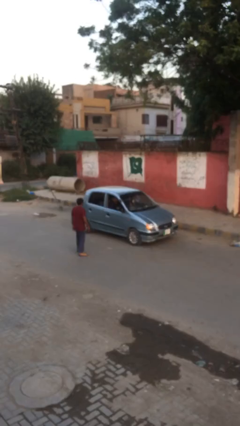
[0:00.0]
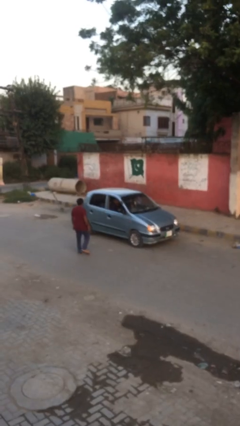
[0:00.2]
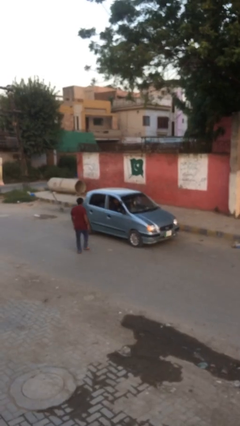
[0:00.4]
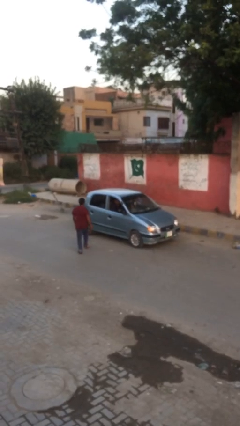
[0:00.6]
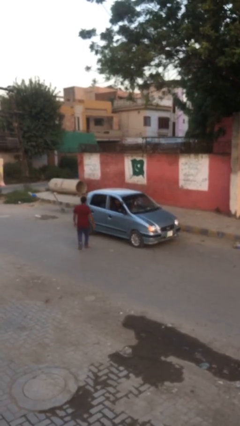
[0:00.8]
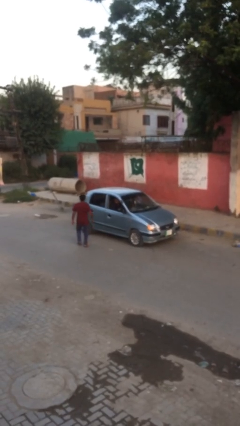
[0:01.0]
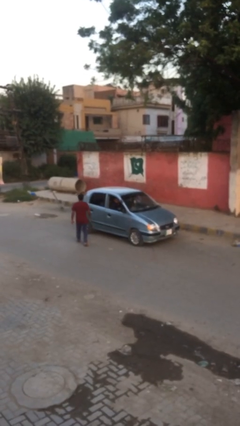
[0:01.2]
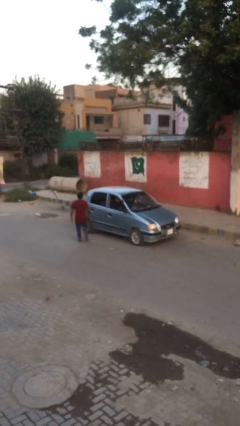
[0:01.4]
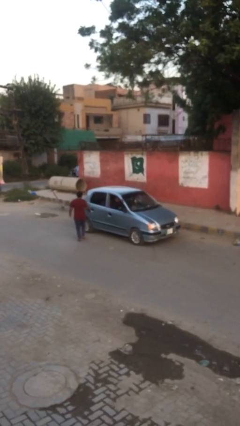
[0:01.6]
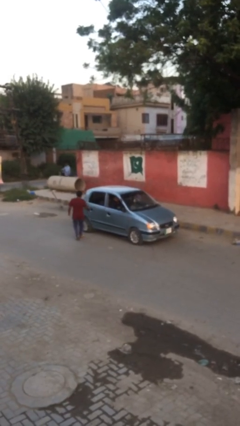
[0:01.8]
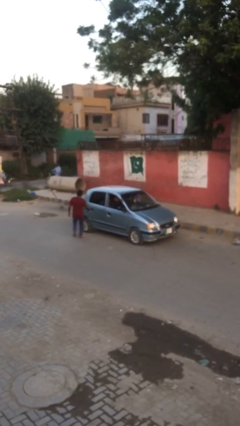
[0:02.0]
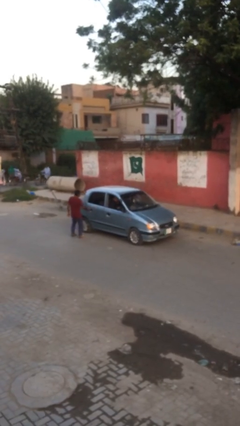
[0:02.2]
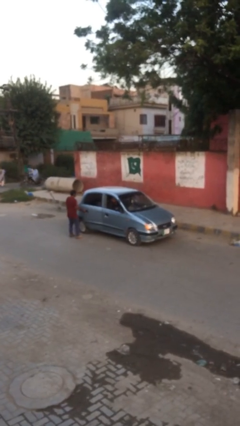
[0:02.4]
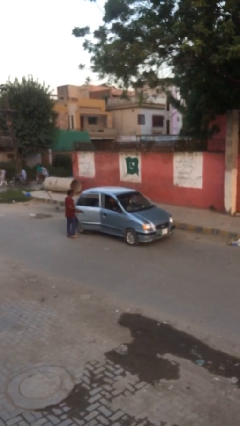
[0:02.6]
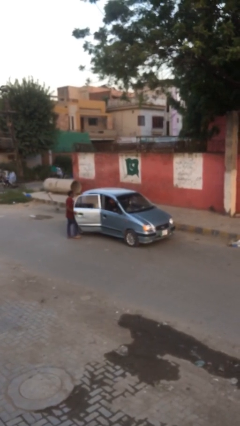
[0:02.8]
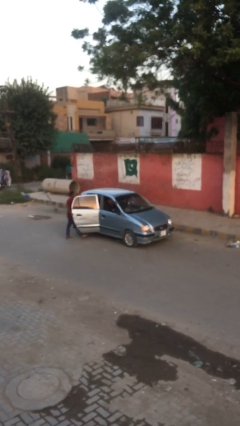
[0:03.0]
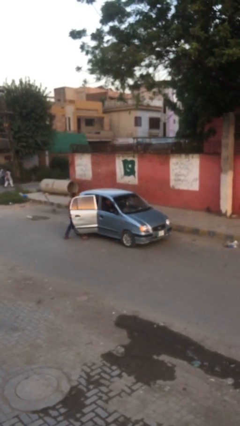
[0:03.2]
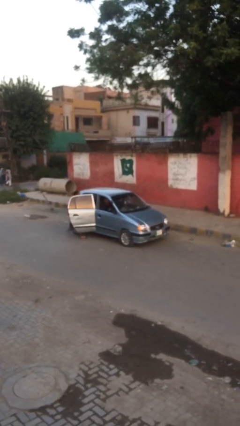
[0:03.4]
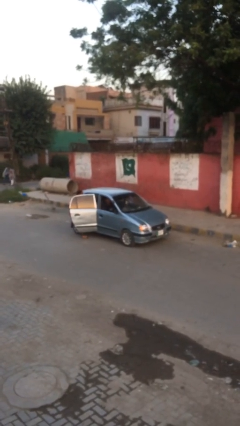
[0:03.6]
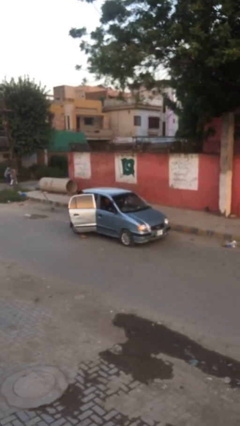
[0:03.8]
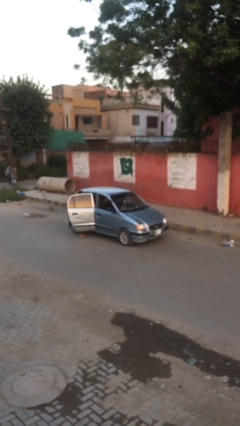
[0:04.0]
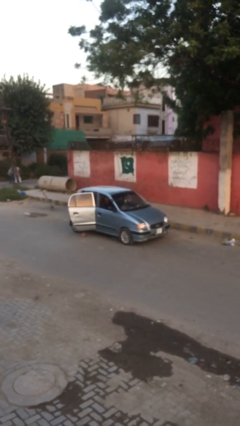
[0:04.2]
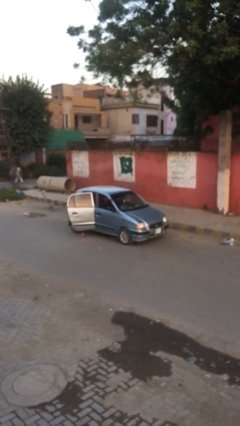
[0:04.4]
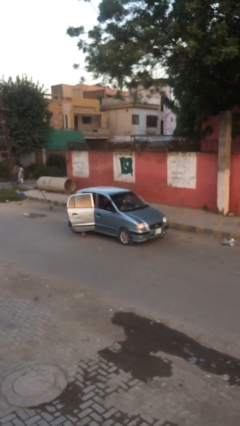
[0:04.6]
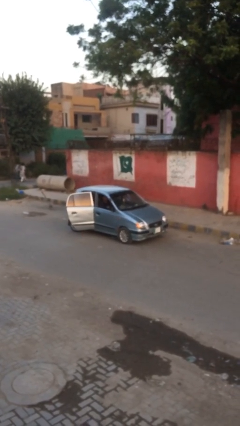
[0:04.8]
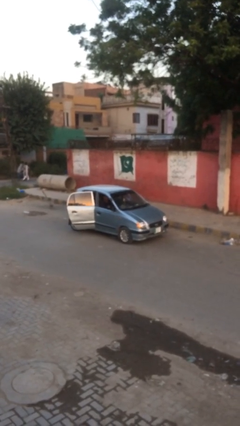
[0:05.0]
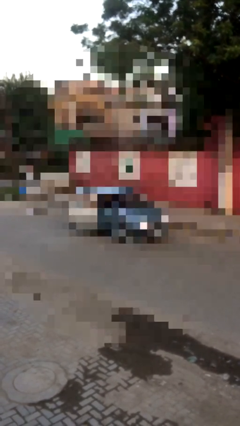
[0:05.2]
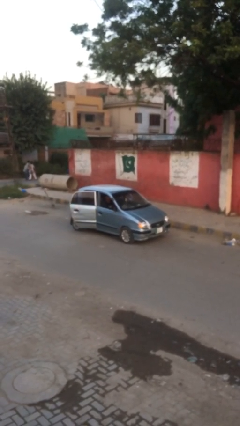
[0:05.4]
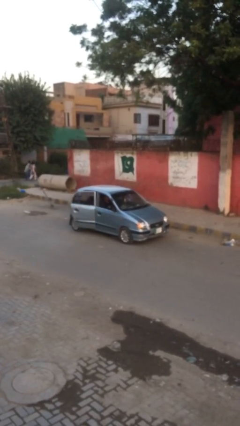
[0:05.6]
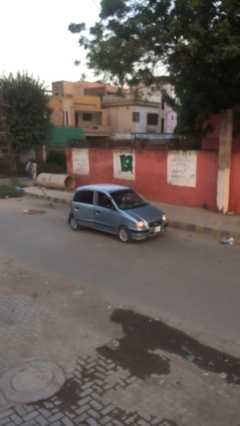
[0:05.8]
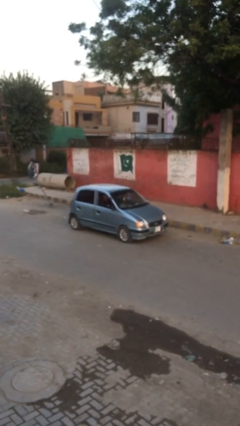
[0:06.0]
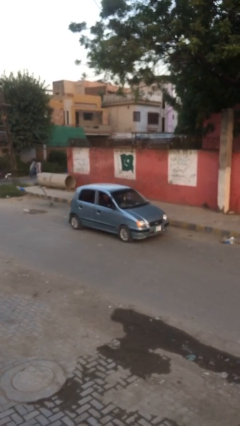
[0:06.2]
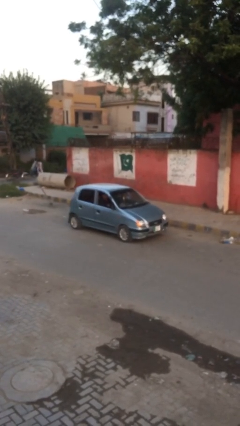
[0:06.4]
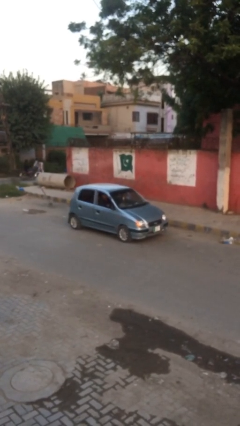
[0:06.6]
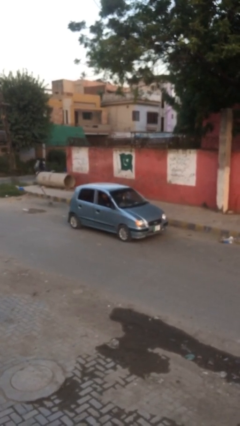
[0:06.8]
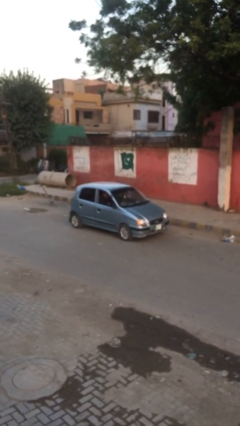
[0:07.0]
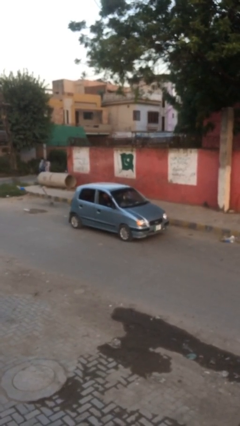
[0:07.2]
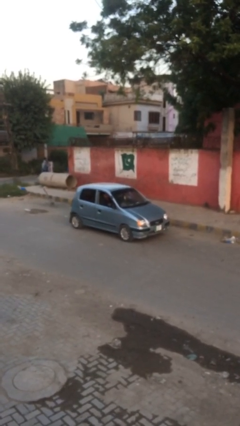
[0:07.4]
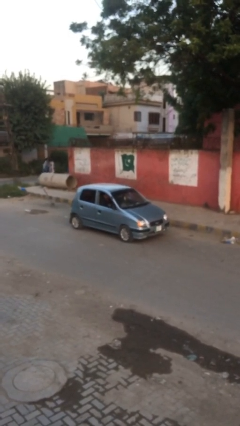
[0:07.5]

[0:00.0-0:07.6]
car picks up person

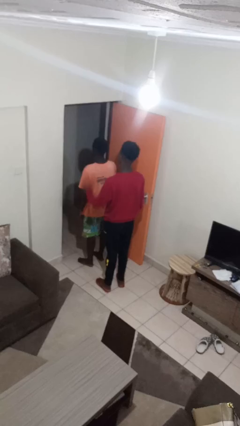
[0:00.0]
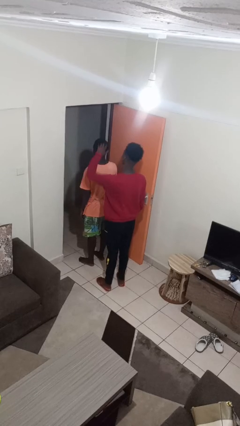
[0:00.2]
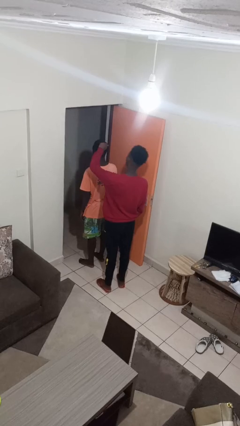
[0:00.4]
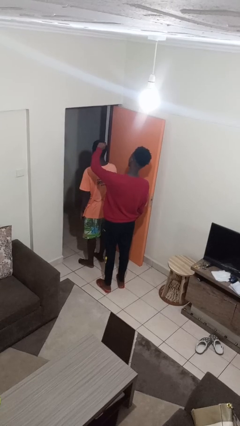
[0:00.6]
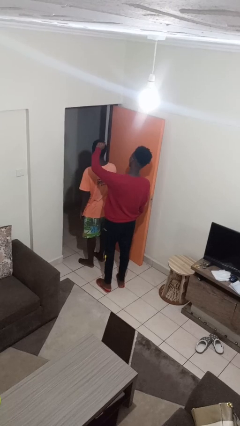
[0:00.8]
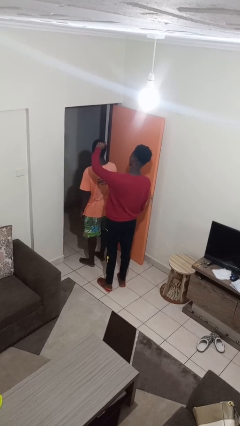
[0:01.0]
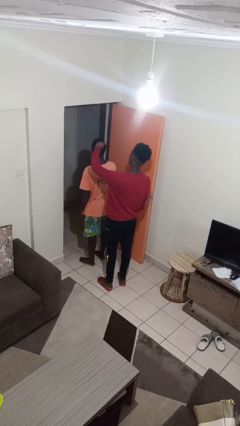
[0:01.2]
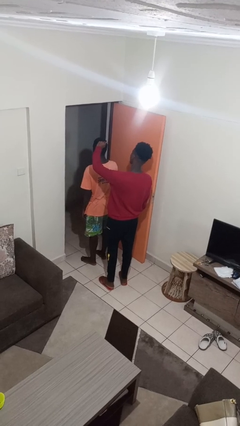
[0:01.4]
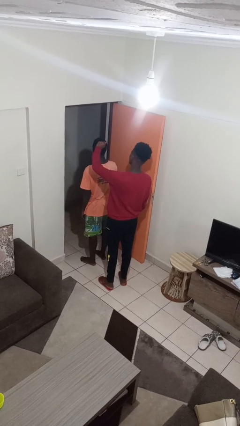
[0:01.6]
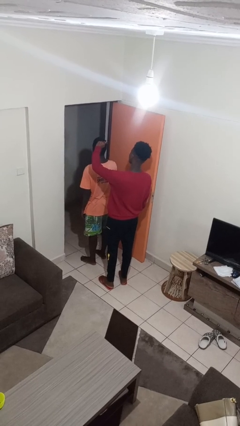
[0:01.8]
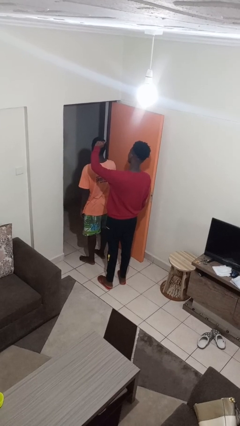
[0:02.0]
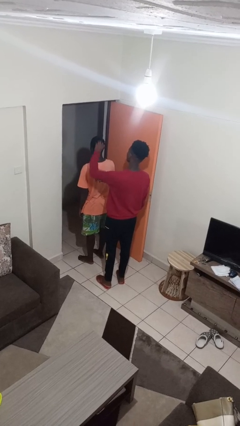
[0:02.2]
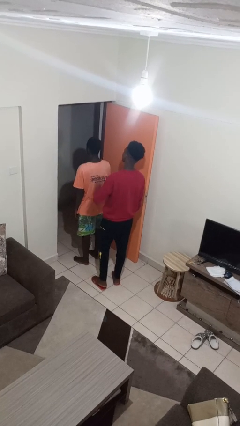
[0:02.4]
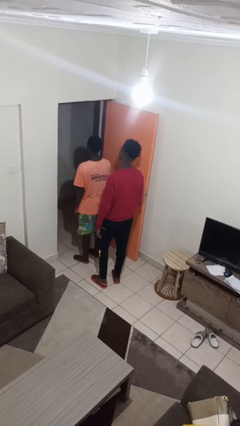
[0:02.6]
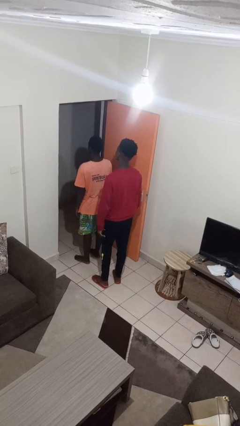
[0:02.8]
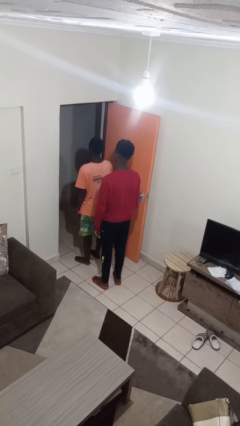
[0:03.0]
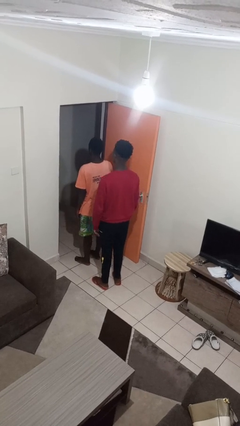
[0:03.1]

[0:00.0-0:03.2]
person grabs person by hair

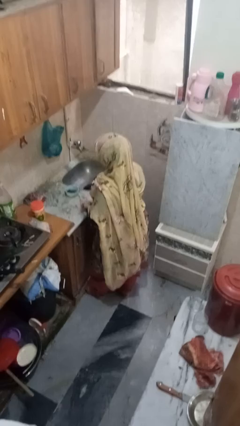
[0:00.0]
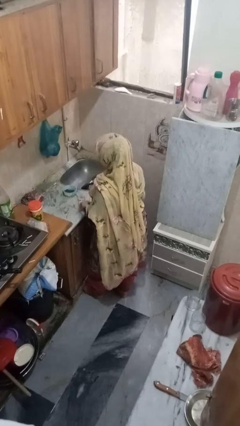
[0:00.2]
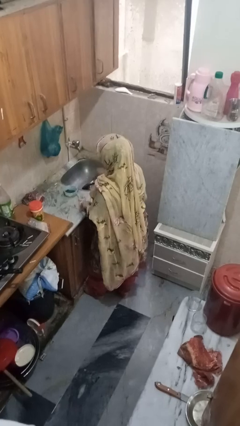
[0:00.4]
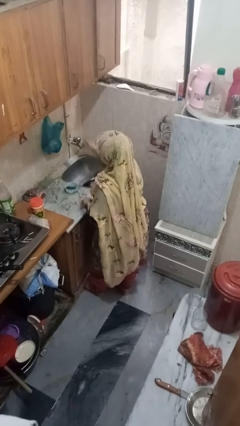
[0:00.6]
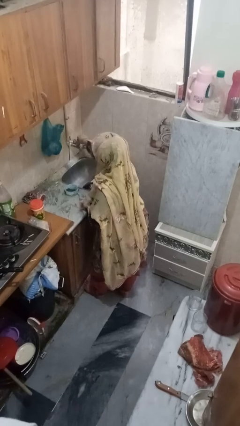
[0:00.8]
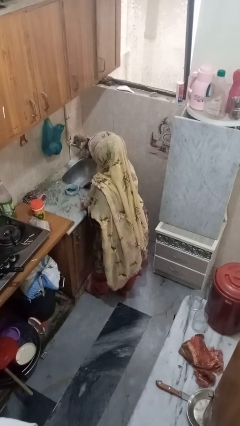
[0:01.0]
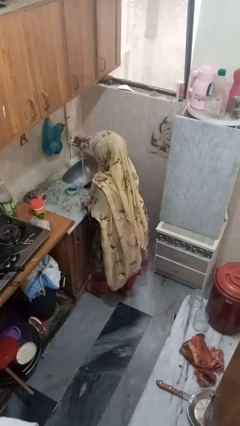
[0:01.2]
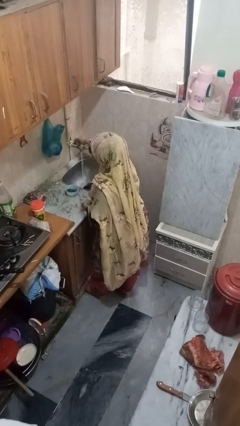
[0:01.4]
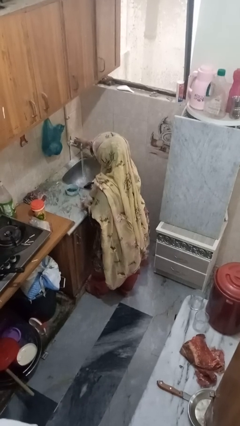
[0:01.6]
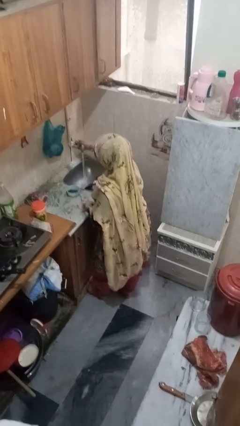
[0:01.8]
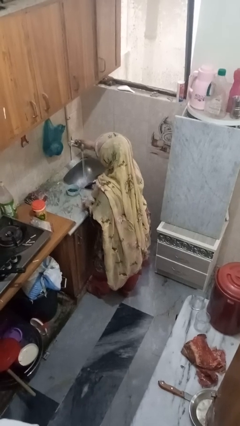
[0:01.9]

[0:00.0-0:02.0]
person turns on faucet

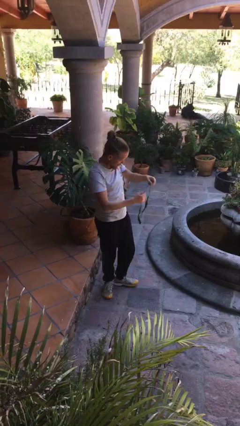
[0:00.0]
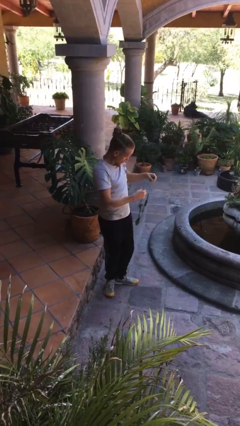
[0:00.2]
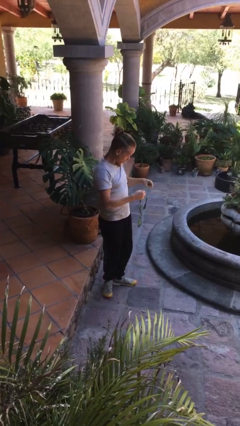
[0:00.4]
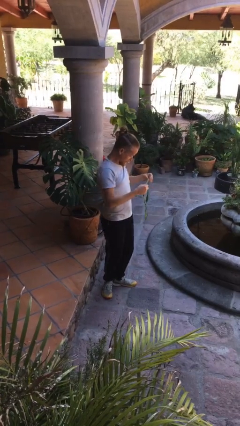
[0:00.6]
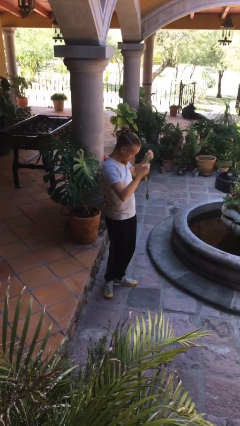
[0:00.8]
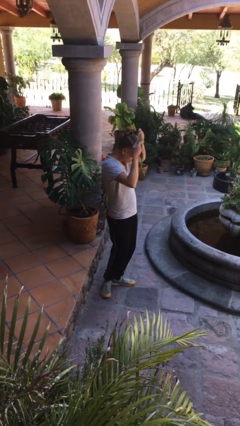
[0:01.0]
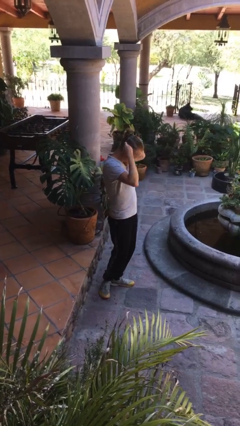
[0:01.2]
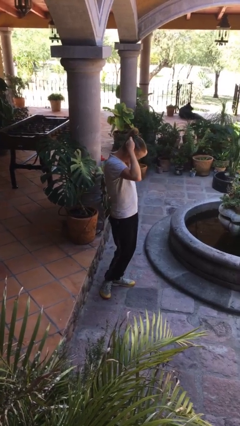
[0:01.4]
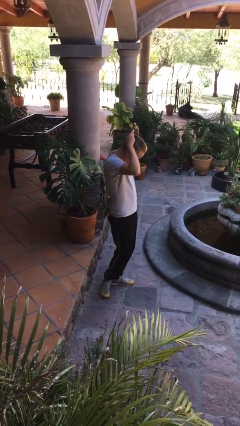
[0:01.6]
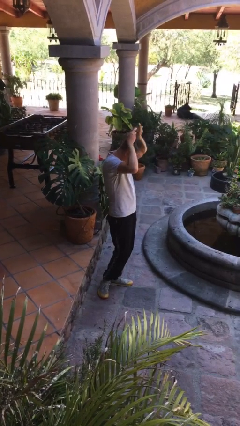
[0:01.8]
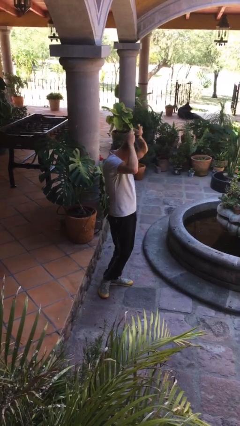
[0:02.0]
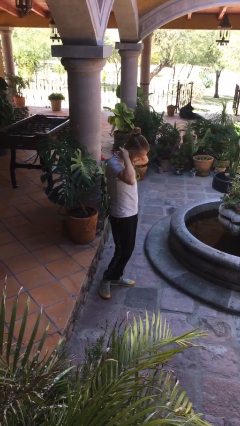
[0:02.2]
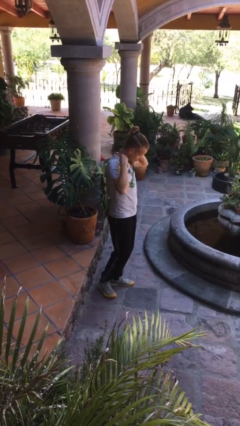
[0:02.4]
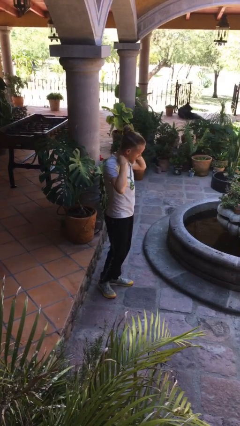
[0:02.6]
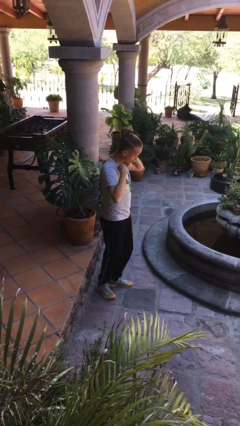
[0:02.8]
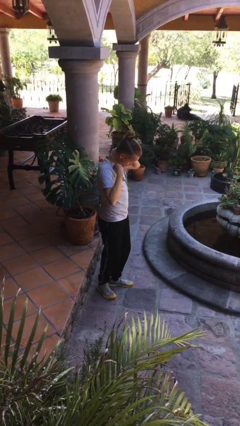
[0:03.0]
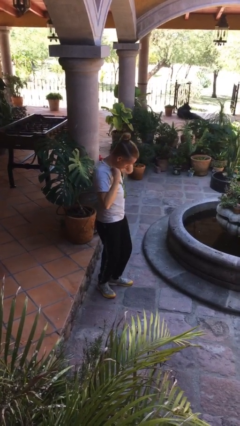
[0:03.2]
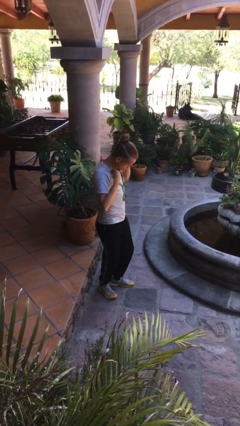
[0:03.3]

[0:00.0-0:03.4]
person puts on necklace

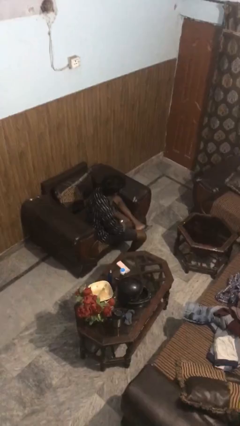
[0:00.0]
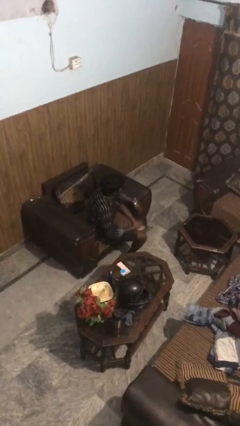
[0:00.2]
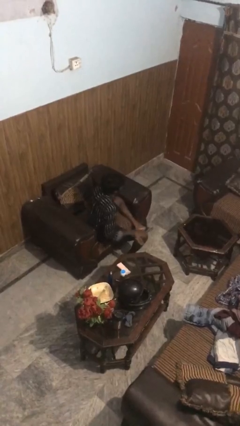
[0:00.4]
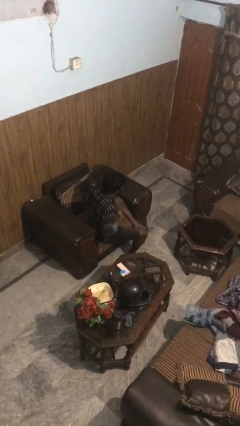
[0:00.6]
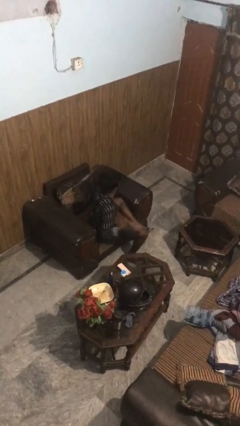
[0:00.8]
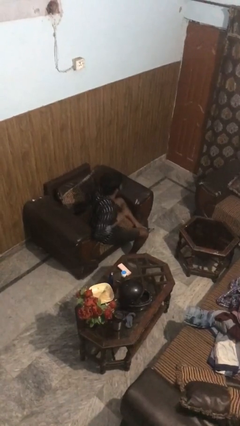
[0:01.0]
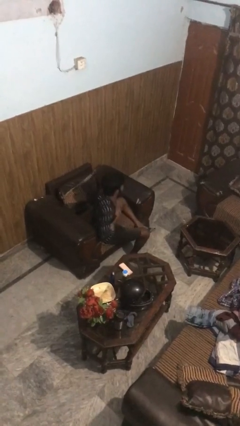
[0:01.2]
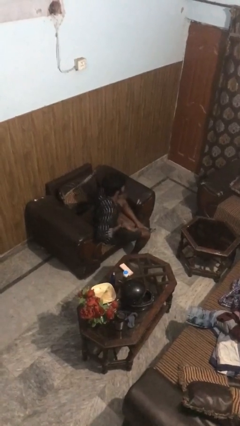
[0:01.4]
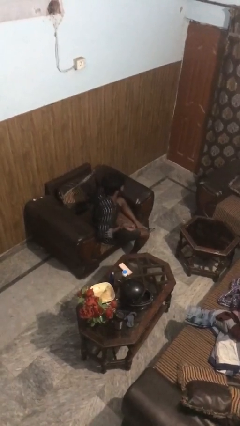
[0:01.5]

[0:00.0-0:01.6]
person drums on chest
